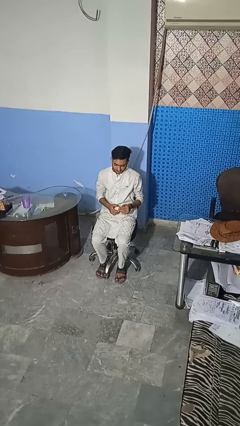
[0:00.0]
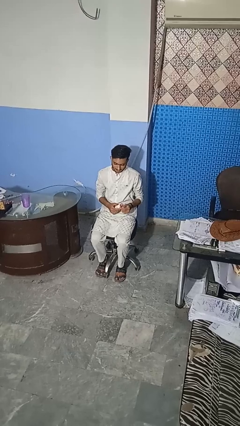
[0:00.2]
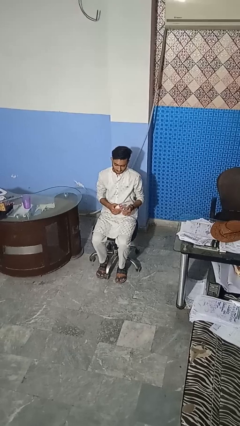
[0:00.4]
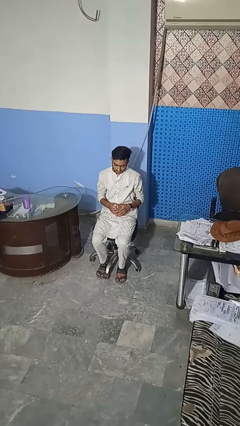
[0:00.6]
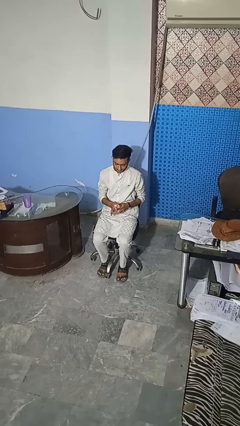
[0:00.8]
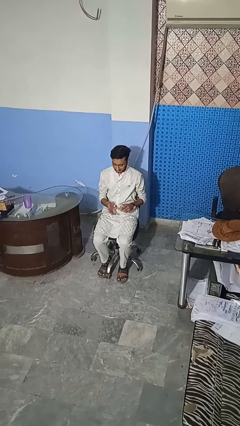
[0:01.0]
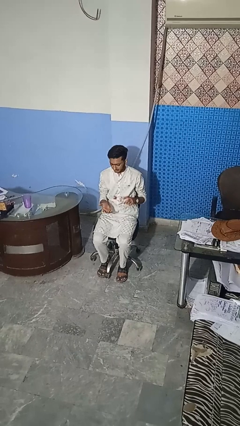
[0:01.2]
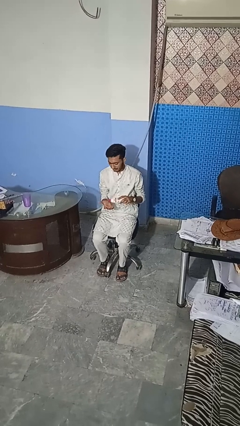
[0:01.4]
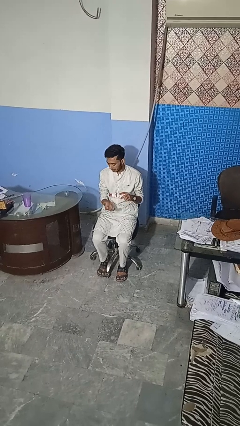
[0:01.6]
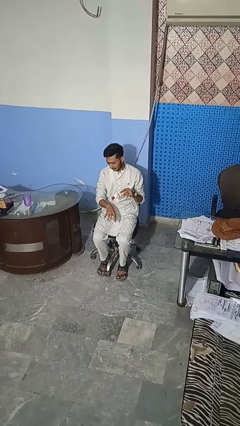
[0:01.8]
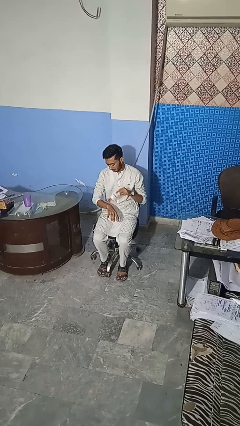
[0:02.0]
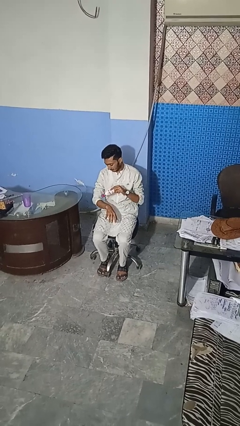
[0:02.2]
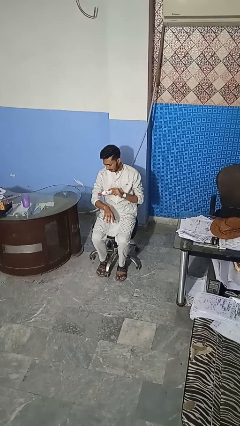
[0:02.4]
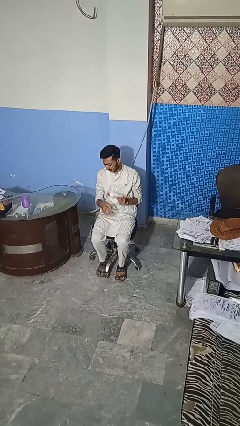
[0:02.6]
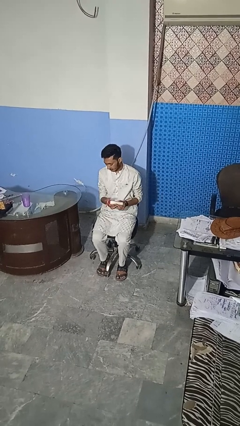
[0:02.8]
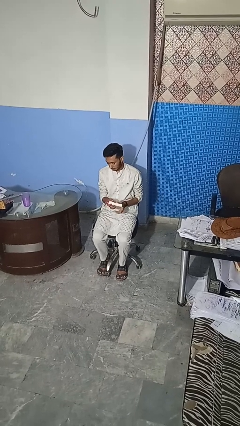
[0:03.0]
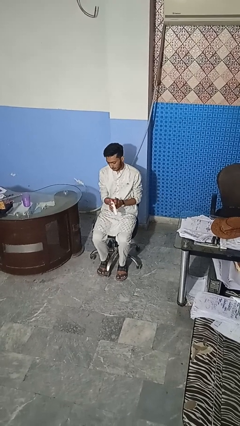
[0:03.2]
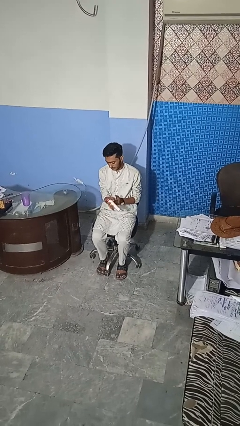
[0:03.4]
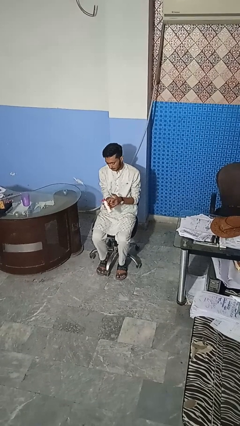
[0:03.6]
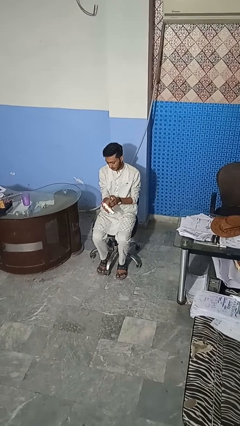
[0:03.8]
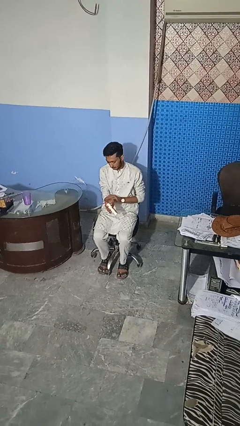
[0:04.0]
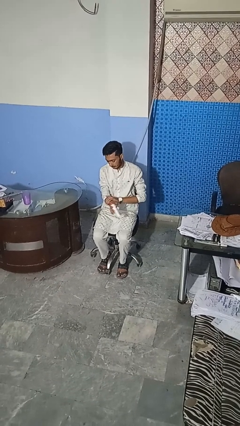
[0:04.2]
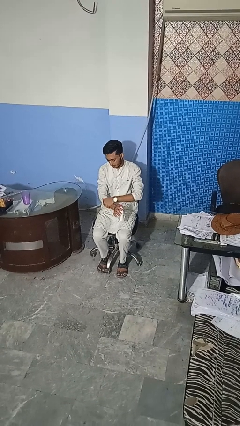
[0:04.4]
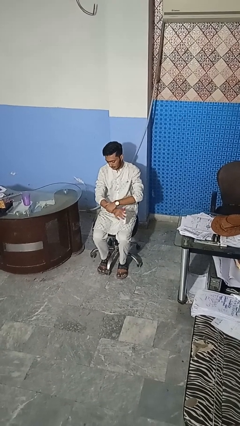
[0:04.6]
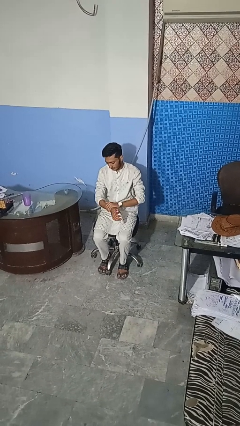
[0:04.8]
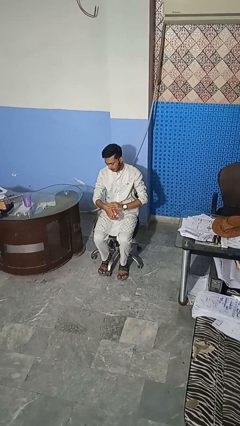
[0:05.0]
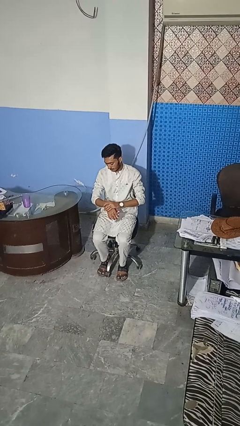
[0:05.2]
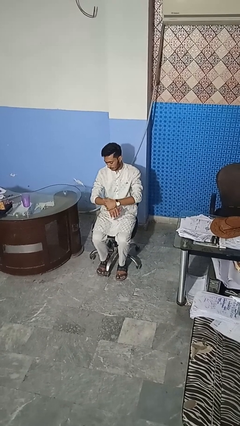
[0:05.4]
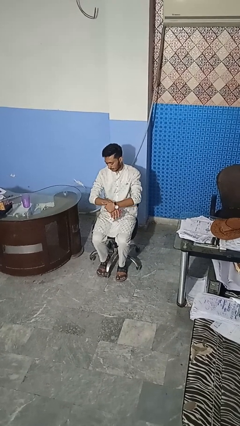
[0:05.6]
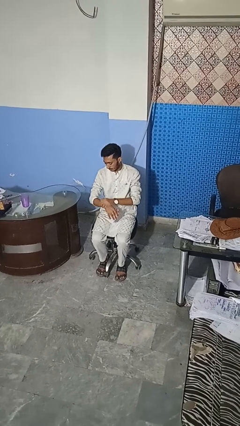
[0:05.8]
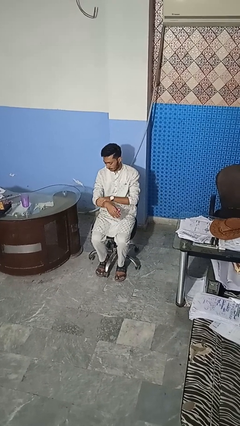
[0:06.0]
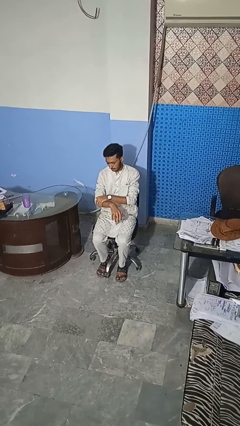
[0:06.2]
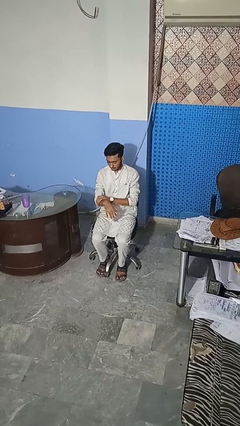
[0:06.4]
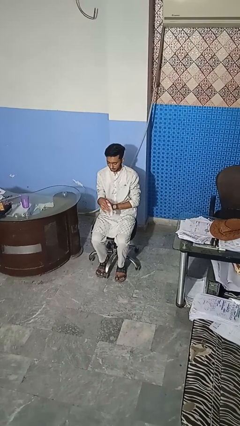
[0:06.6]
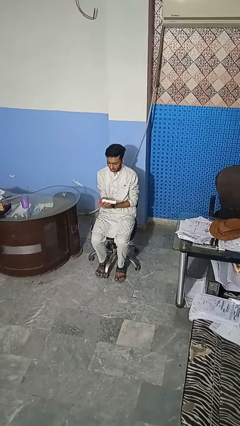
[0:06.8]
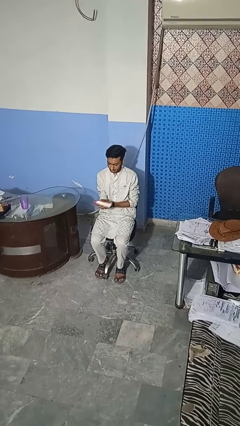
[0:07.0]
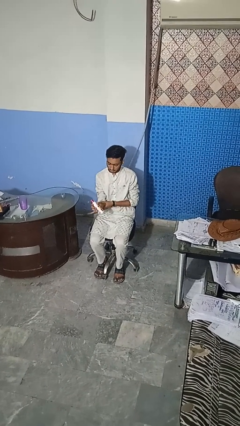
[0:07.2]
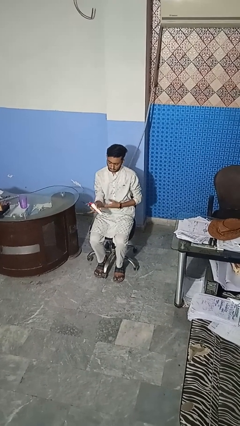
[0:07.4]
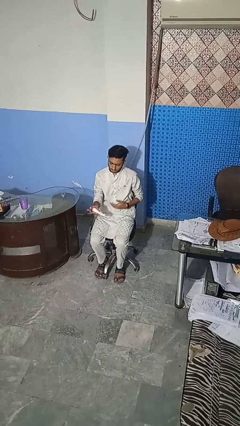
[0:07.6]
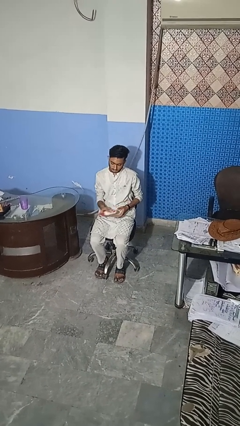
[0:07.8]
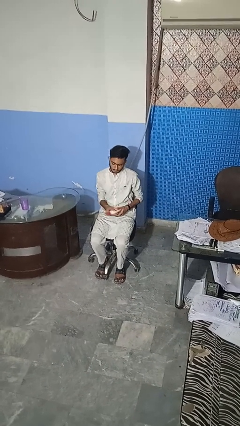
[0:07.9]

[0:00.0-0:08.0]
person applies sunscreen

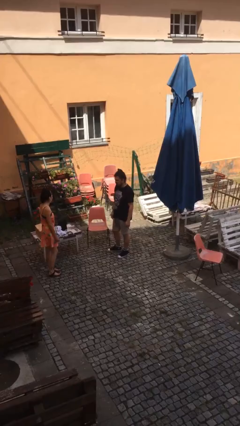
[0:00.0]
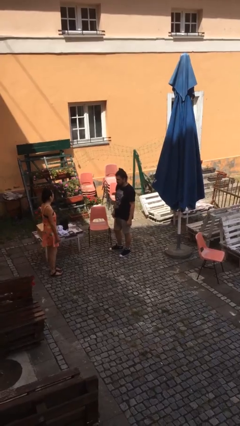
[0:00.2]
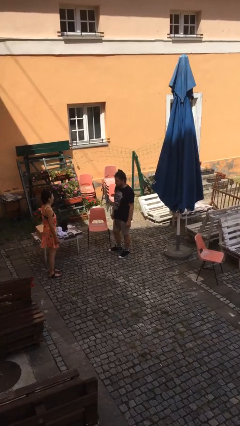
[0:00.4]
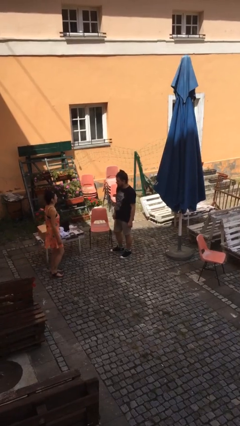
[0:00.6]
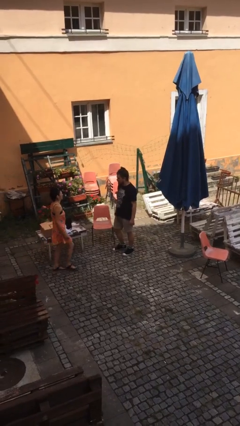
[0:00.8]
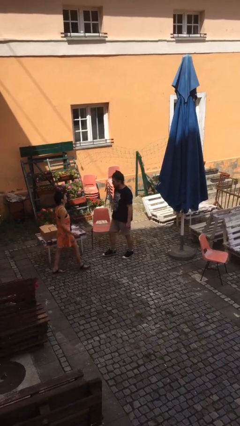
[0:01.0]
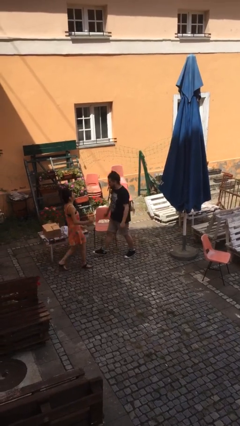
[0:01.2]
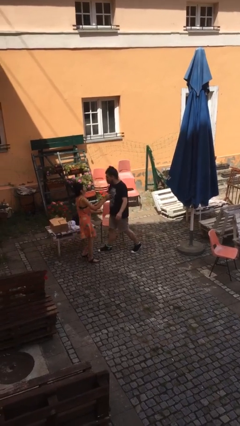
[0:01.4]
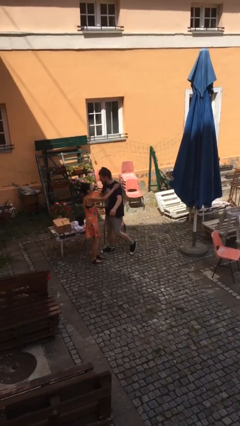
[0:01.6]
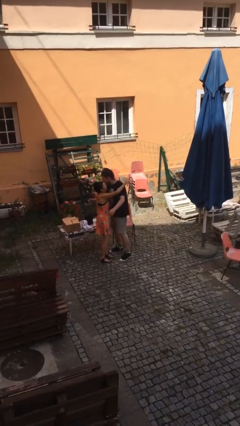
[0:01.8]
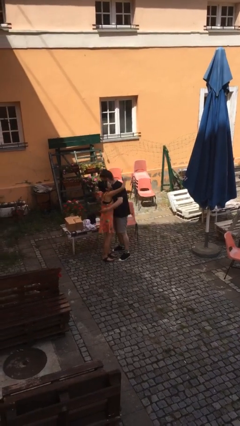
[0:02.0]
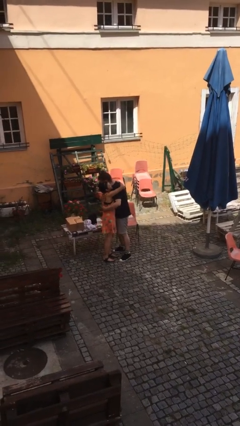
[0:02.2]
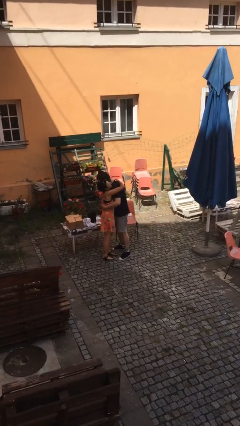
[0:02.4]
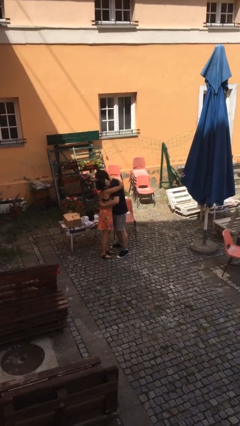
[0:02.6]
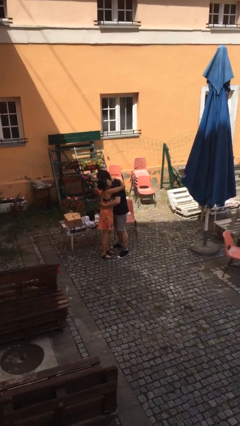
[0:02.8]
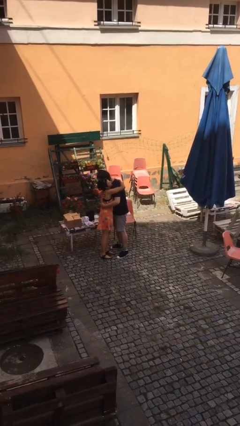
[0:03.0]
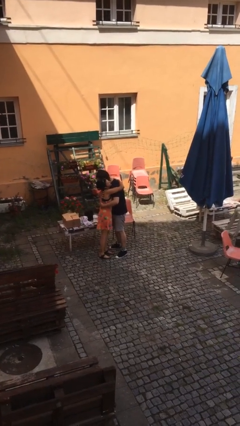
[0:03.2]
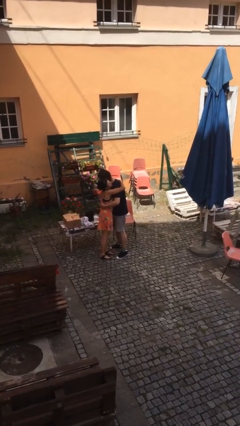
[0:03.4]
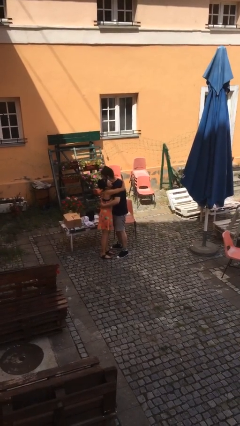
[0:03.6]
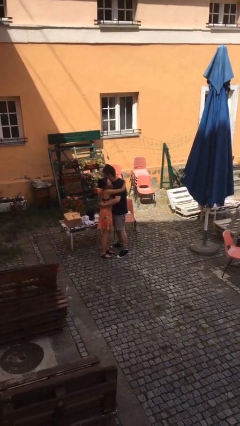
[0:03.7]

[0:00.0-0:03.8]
person embraces person

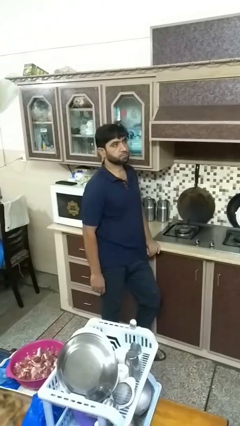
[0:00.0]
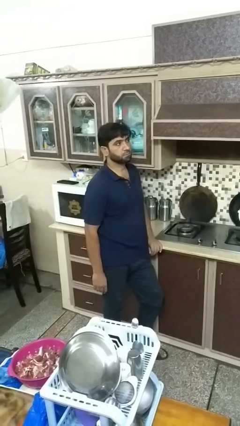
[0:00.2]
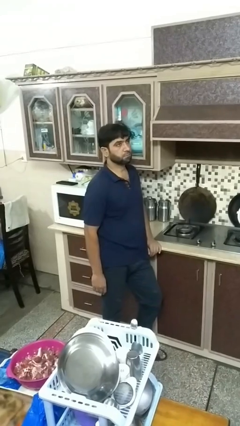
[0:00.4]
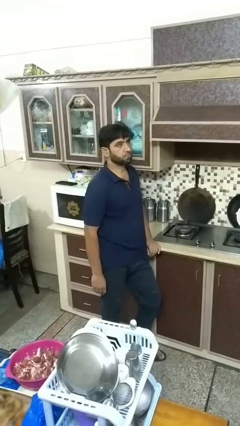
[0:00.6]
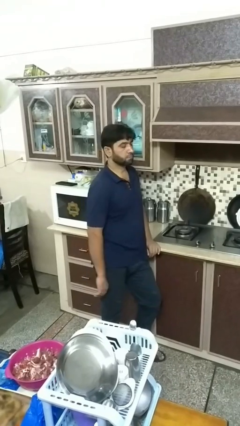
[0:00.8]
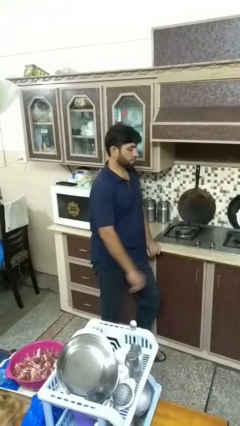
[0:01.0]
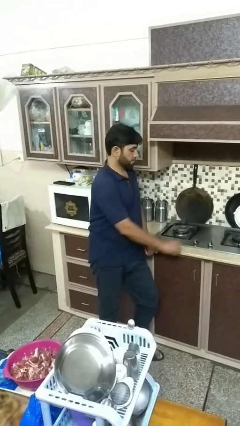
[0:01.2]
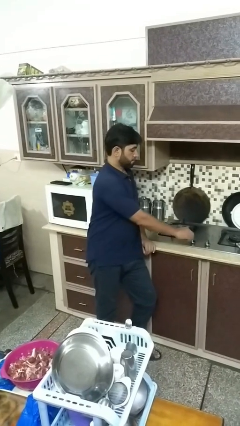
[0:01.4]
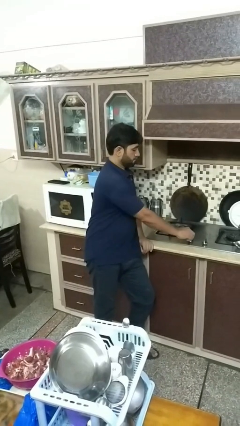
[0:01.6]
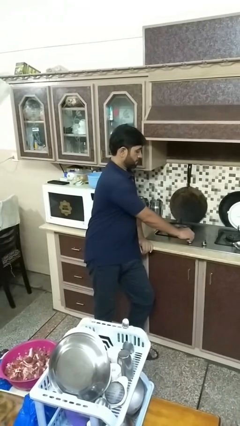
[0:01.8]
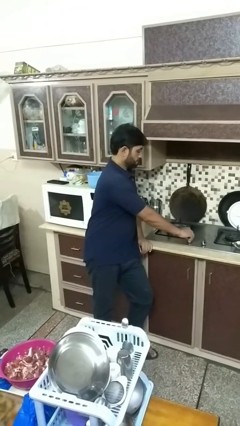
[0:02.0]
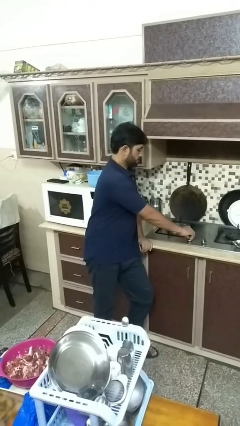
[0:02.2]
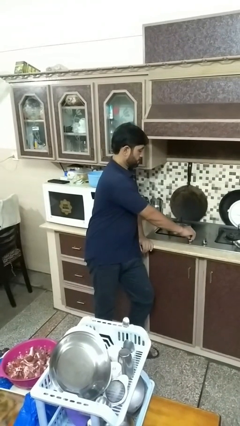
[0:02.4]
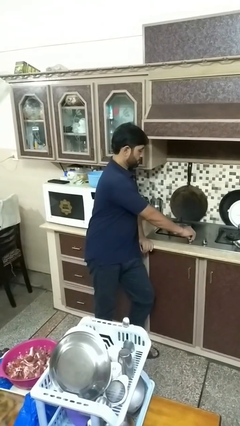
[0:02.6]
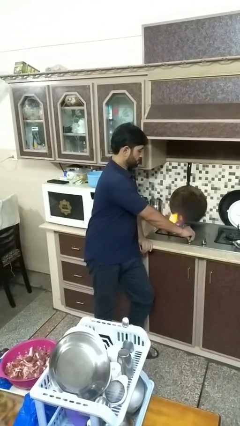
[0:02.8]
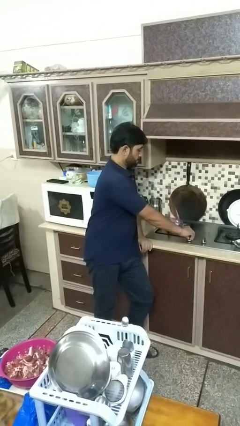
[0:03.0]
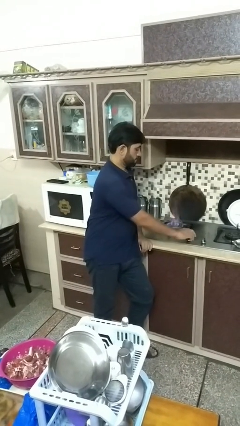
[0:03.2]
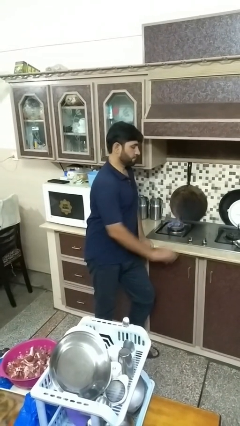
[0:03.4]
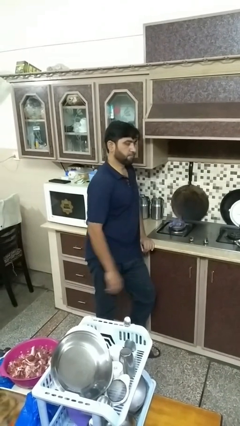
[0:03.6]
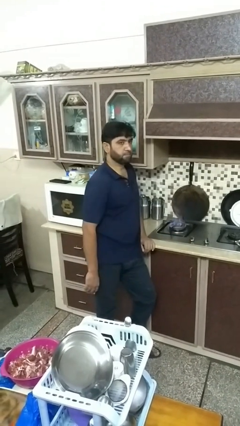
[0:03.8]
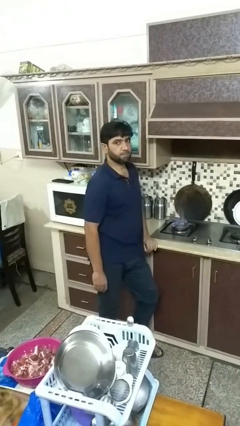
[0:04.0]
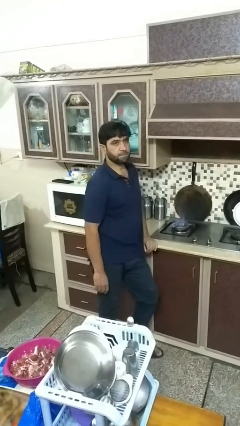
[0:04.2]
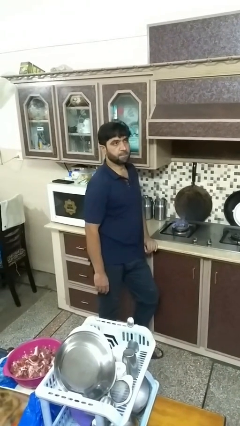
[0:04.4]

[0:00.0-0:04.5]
person turns on stovetop

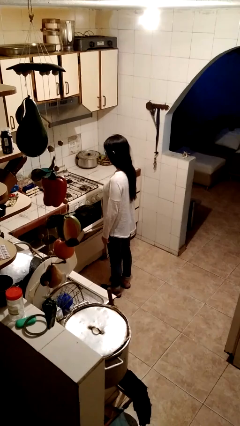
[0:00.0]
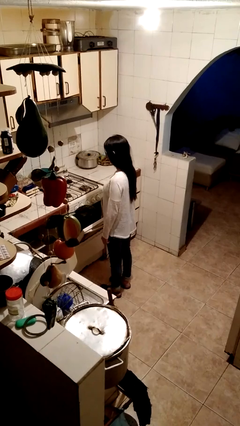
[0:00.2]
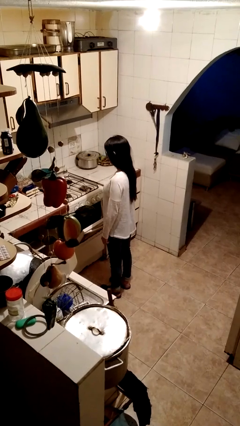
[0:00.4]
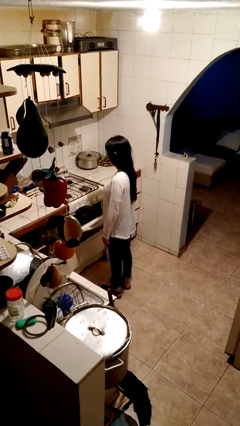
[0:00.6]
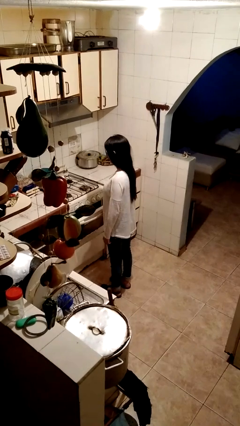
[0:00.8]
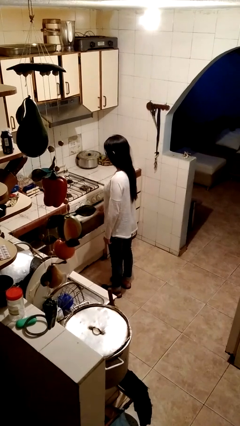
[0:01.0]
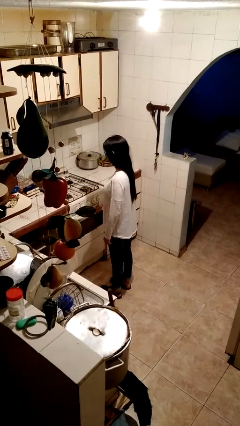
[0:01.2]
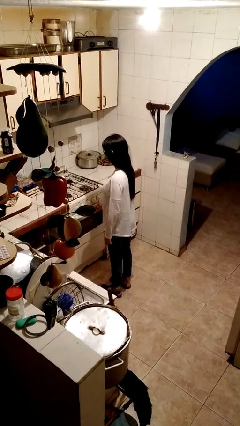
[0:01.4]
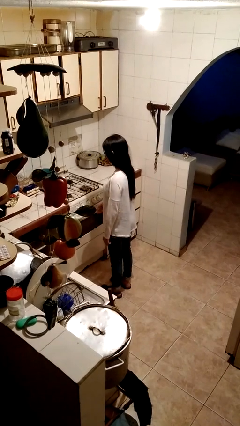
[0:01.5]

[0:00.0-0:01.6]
person closes oven door

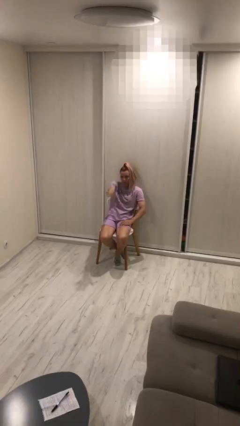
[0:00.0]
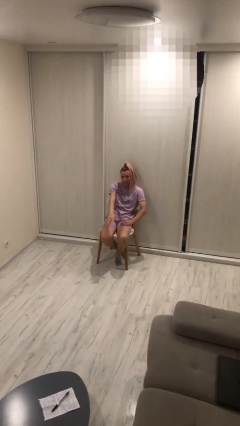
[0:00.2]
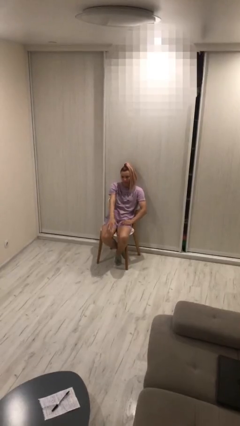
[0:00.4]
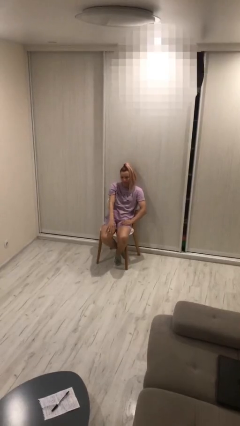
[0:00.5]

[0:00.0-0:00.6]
person gestures swipe down
